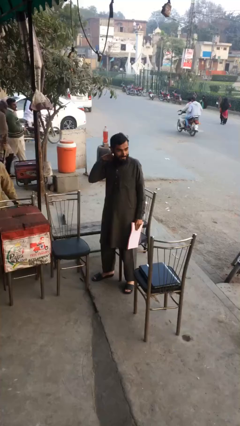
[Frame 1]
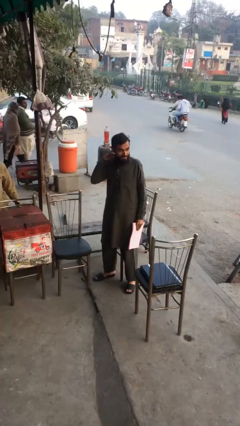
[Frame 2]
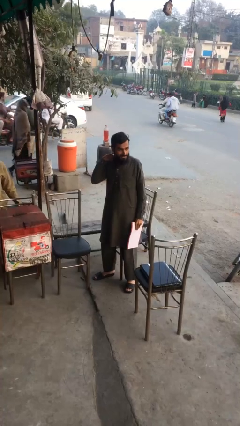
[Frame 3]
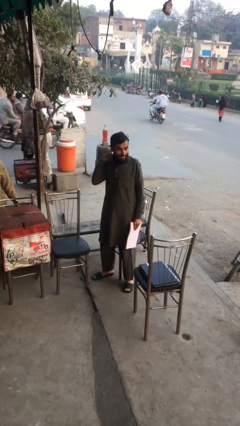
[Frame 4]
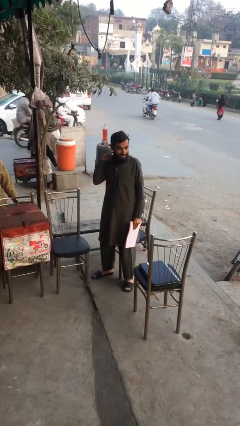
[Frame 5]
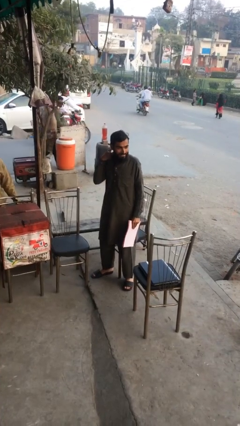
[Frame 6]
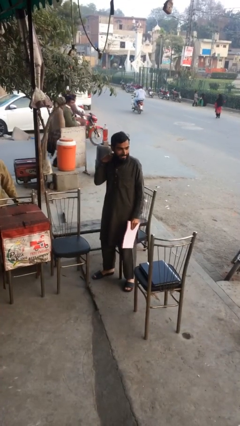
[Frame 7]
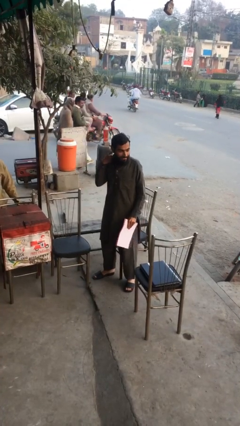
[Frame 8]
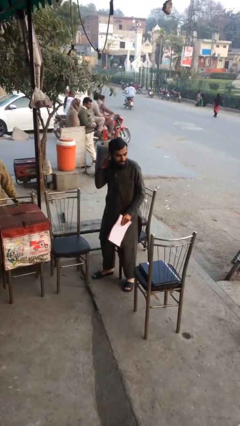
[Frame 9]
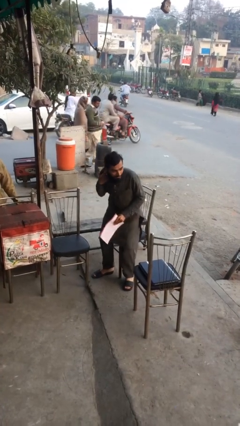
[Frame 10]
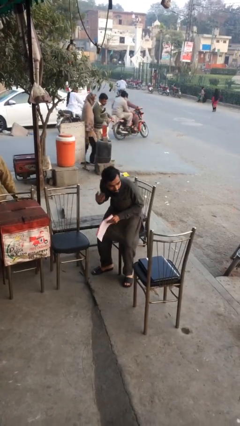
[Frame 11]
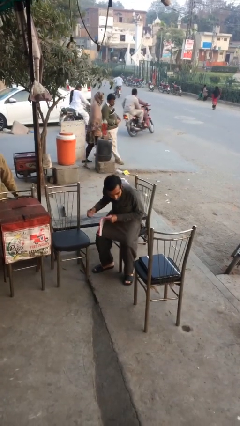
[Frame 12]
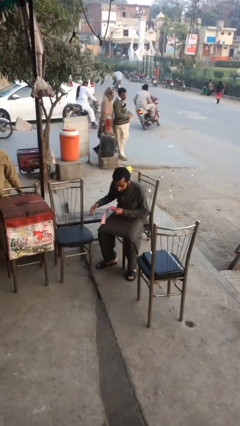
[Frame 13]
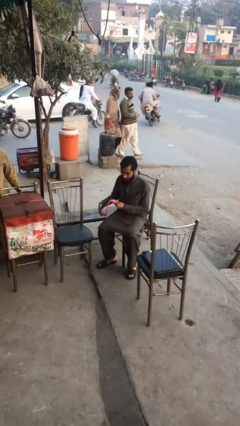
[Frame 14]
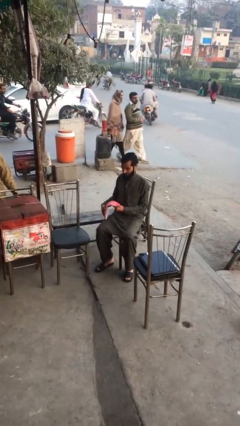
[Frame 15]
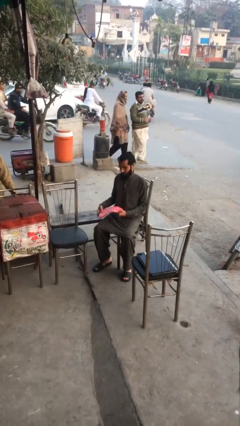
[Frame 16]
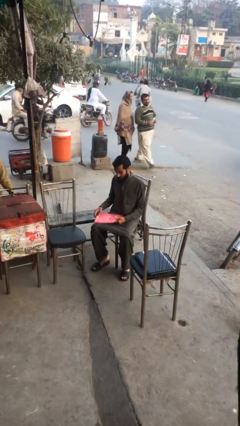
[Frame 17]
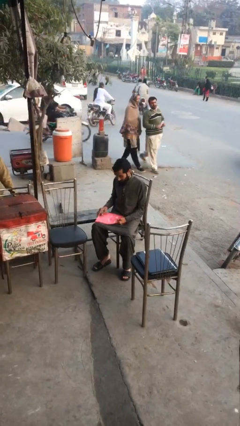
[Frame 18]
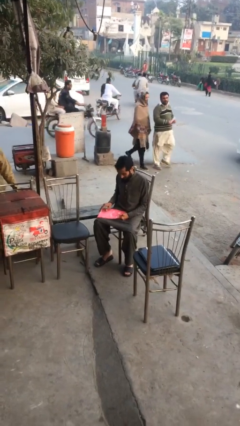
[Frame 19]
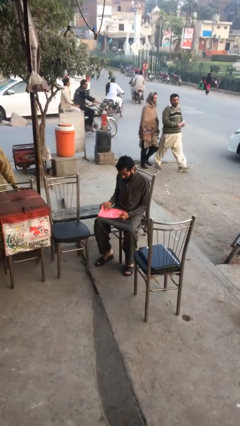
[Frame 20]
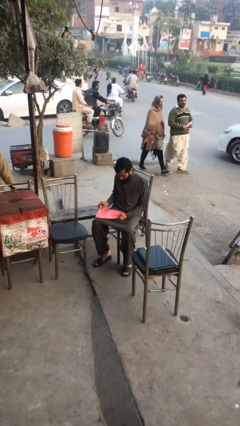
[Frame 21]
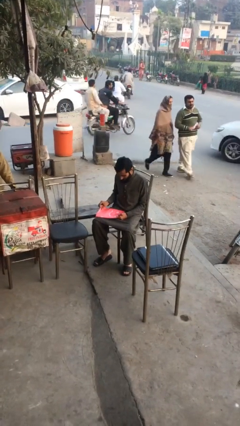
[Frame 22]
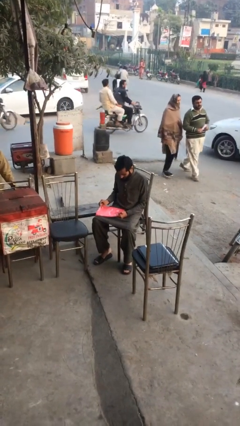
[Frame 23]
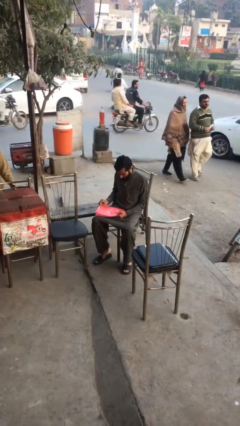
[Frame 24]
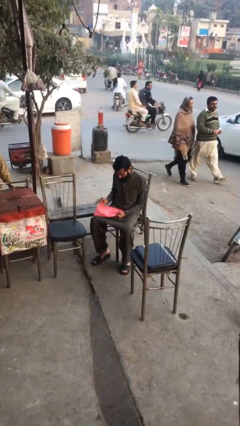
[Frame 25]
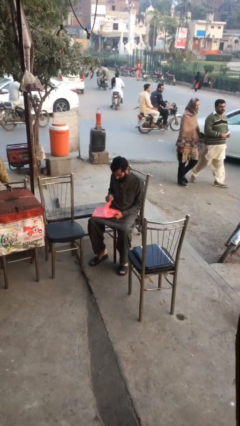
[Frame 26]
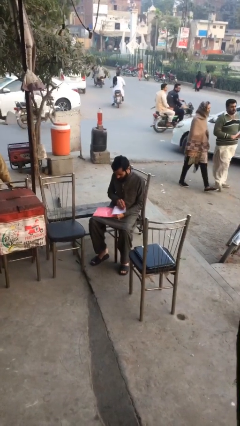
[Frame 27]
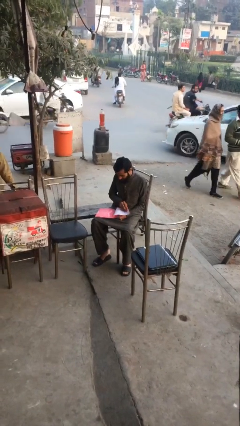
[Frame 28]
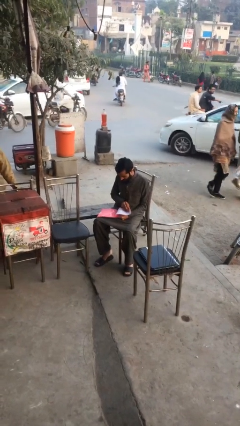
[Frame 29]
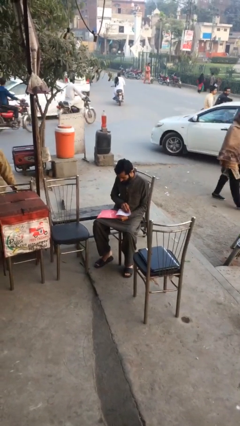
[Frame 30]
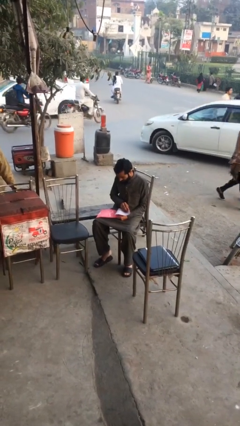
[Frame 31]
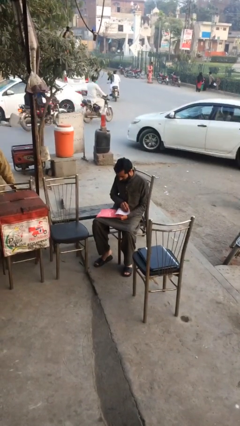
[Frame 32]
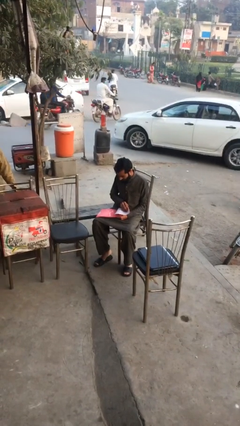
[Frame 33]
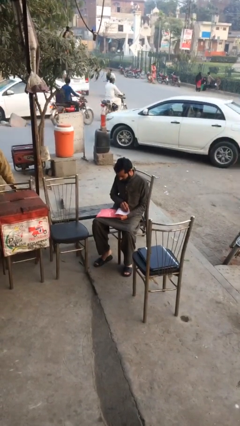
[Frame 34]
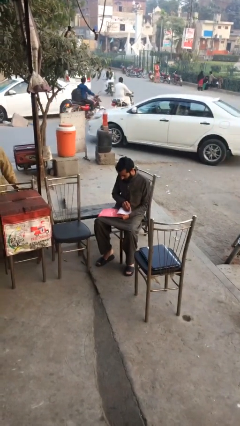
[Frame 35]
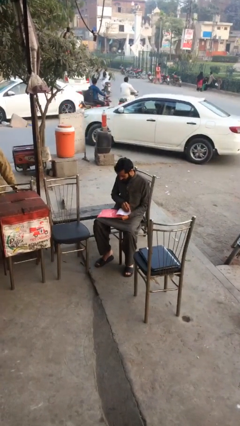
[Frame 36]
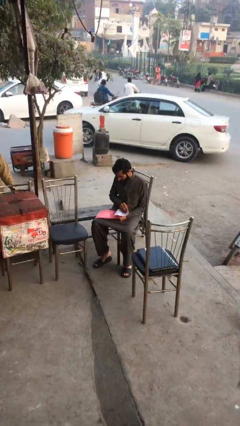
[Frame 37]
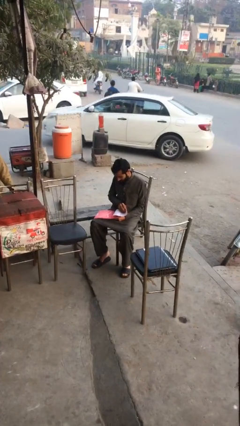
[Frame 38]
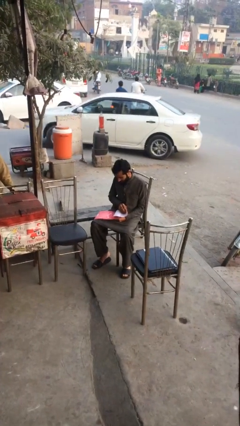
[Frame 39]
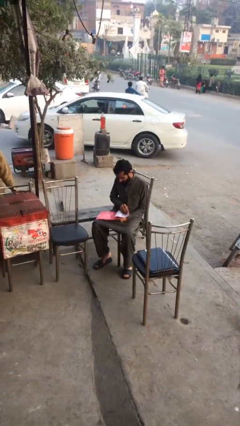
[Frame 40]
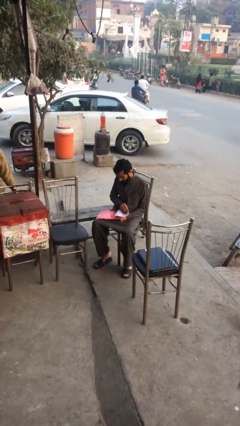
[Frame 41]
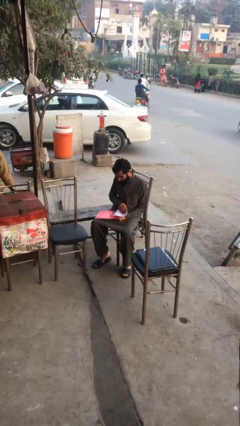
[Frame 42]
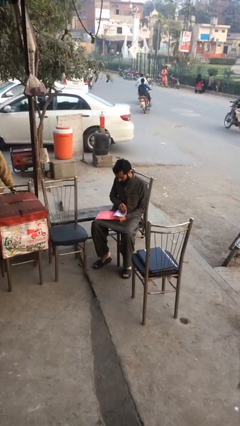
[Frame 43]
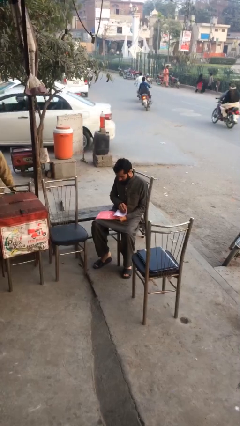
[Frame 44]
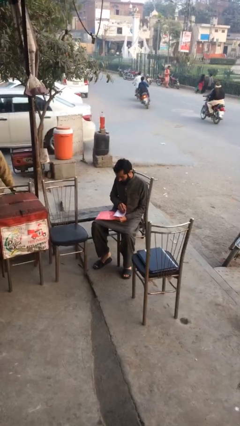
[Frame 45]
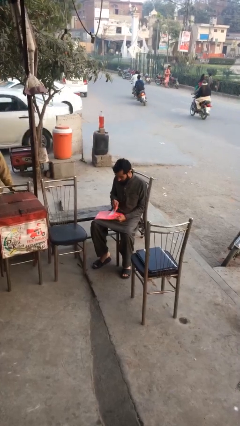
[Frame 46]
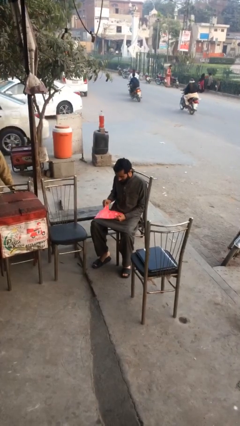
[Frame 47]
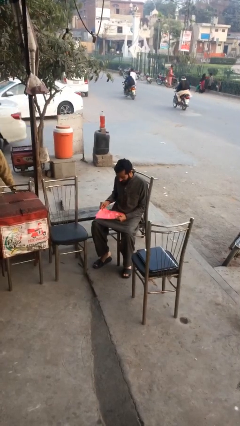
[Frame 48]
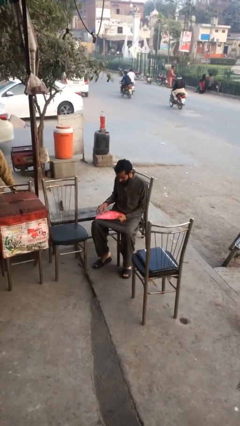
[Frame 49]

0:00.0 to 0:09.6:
person reads document

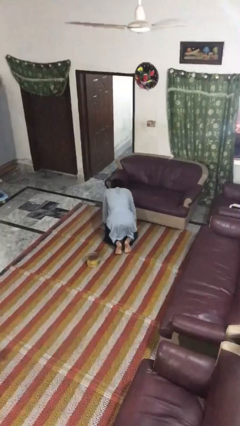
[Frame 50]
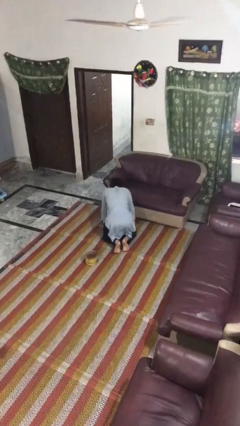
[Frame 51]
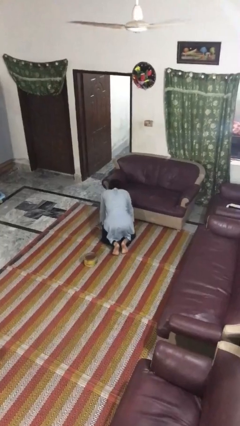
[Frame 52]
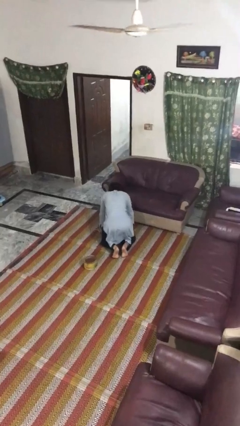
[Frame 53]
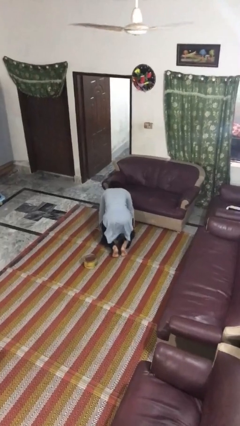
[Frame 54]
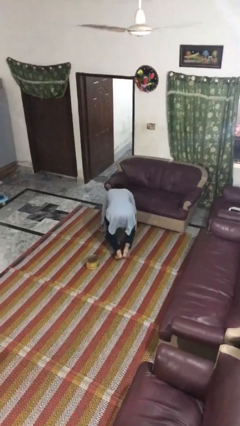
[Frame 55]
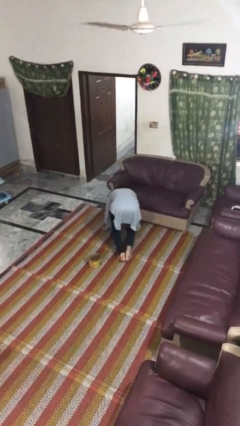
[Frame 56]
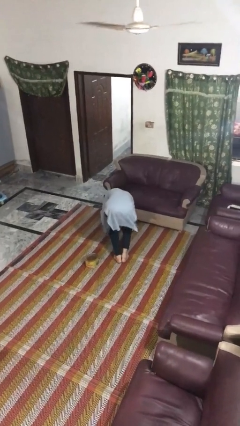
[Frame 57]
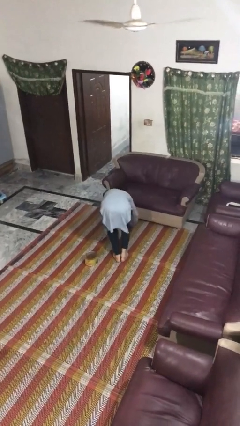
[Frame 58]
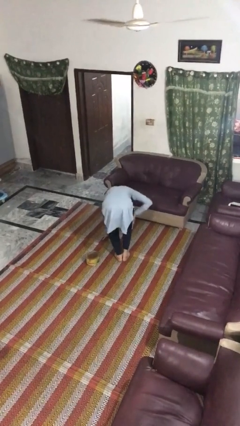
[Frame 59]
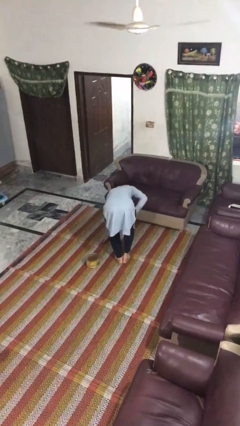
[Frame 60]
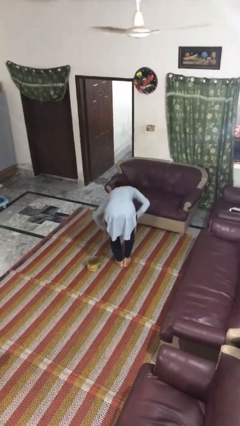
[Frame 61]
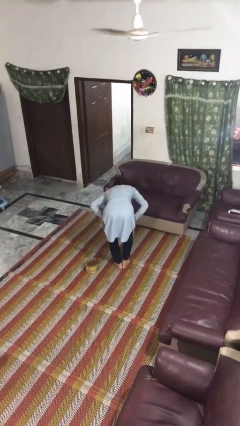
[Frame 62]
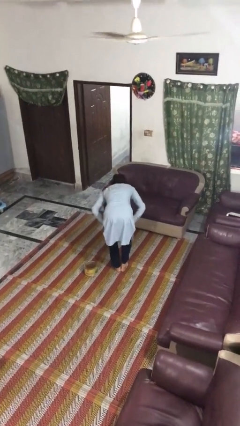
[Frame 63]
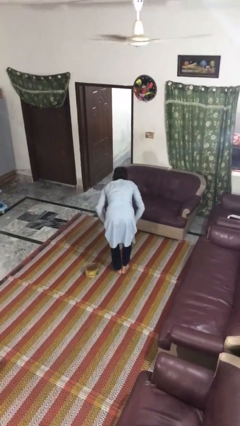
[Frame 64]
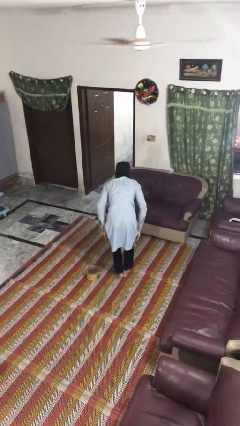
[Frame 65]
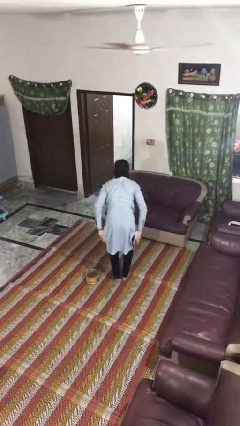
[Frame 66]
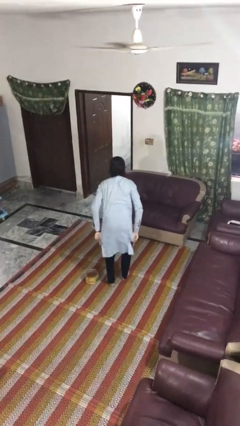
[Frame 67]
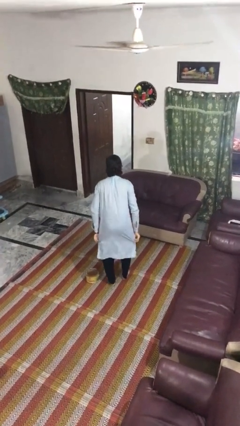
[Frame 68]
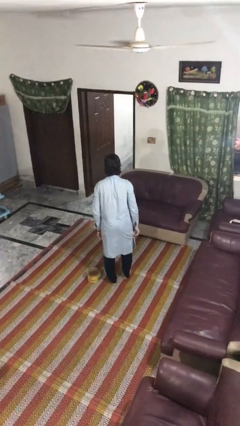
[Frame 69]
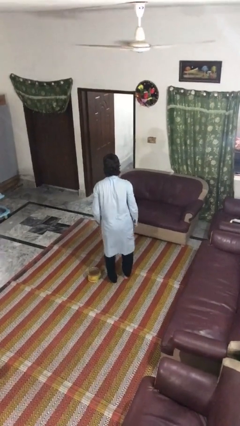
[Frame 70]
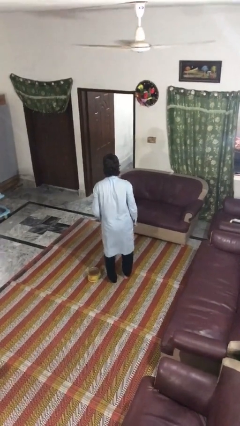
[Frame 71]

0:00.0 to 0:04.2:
person stands up from floor

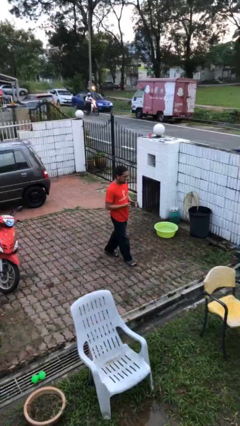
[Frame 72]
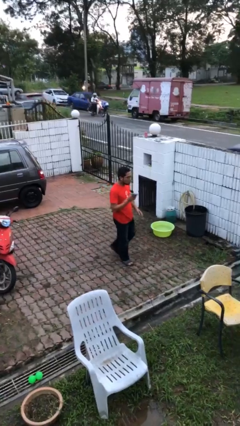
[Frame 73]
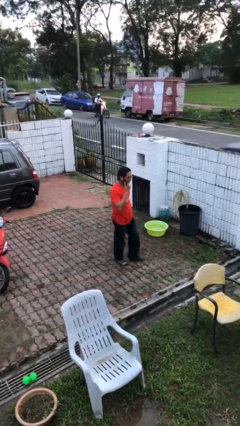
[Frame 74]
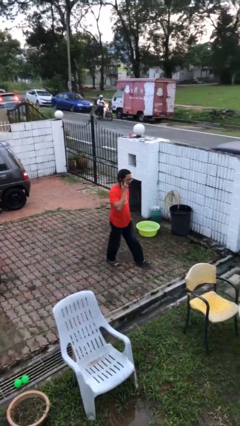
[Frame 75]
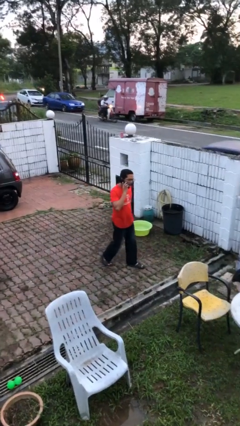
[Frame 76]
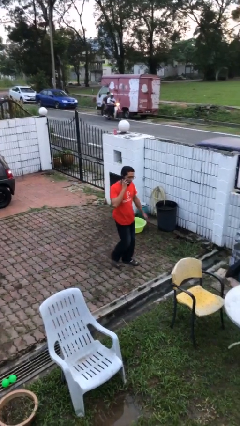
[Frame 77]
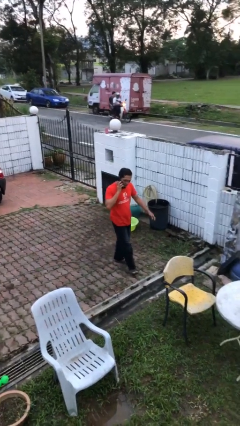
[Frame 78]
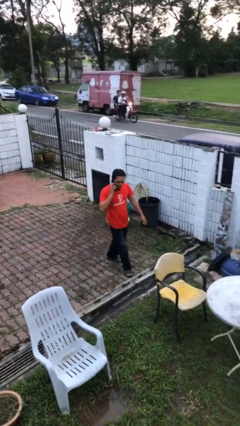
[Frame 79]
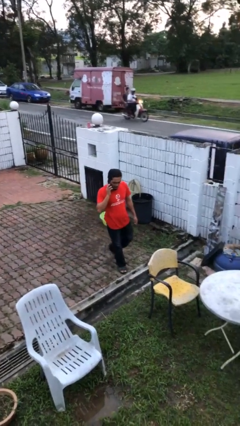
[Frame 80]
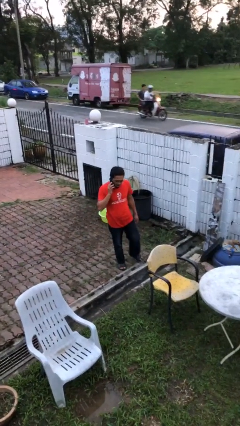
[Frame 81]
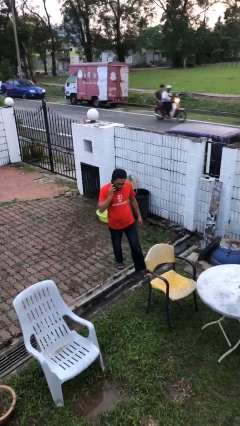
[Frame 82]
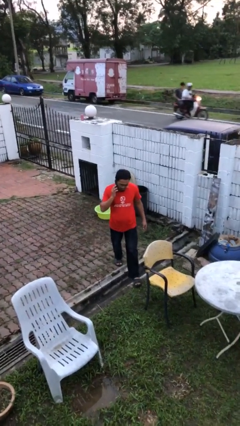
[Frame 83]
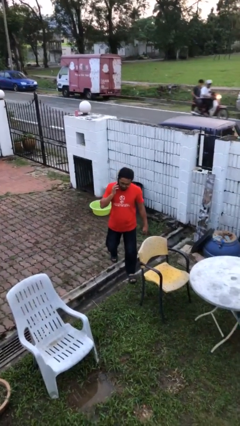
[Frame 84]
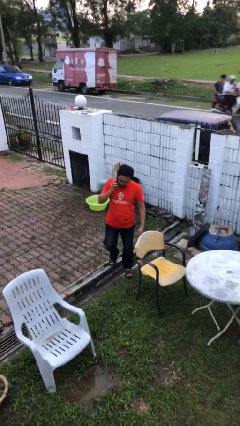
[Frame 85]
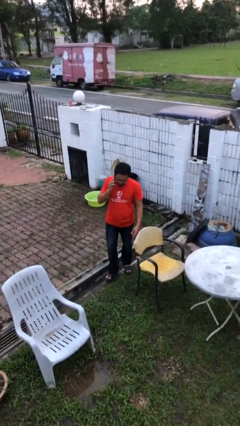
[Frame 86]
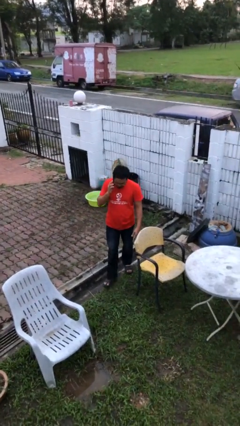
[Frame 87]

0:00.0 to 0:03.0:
person talks on phone

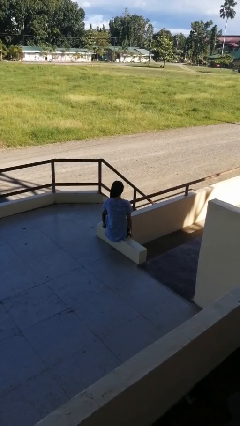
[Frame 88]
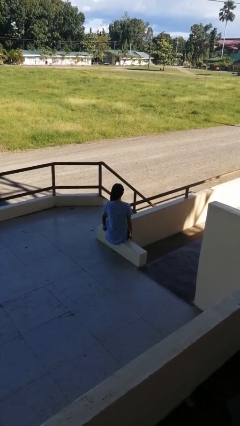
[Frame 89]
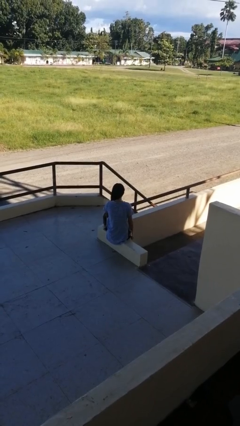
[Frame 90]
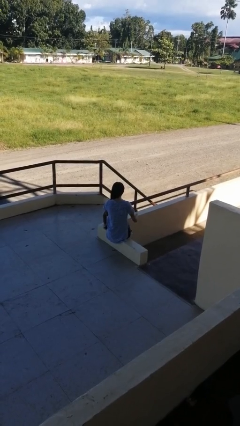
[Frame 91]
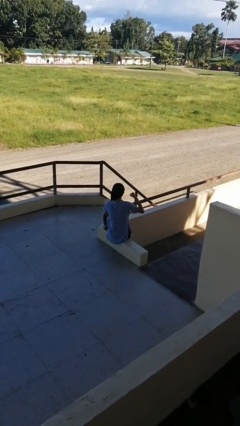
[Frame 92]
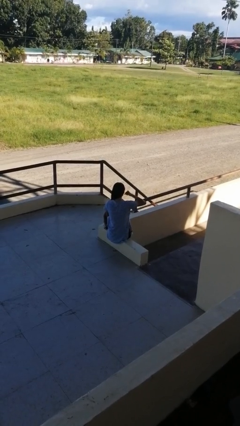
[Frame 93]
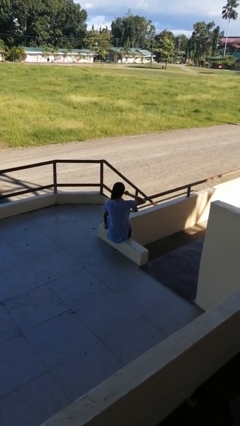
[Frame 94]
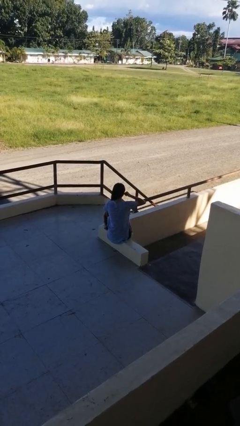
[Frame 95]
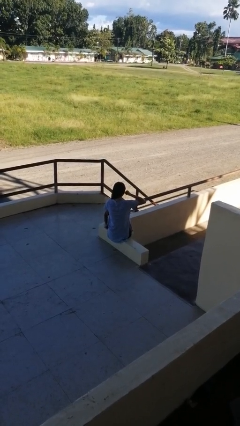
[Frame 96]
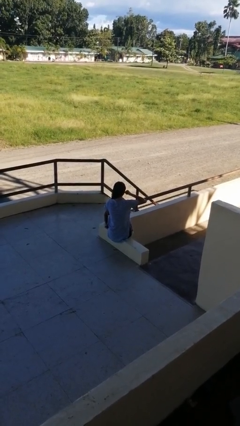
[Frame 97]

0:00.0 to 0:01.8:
person gestures call me
